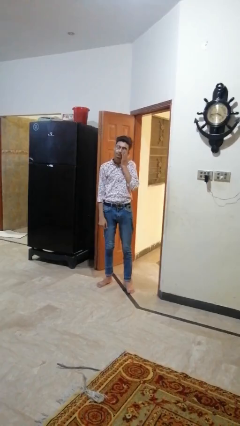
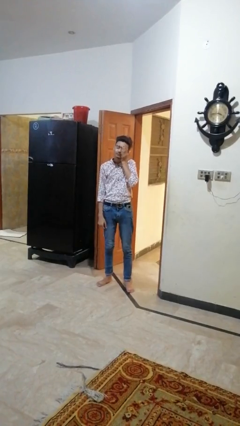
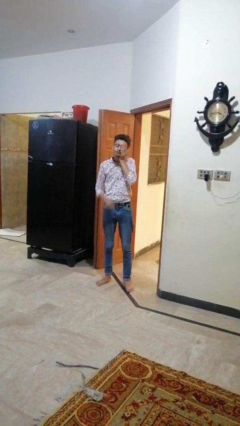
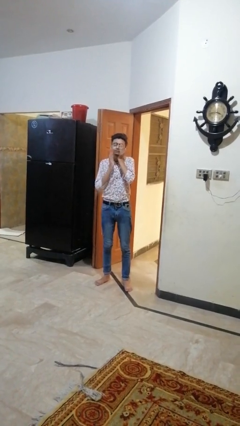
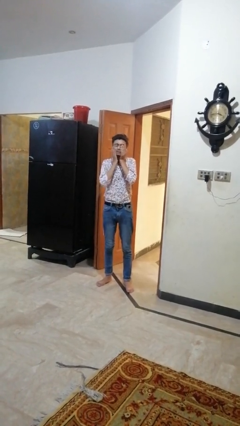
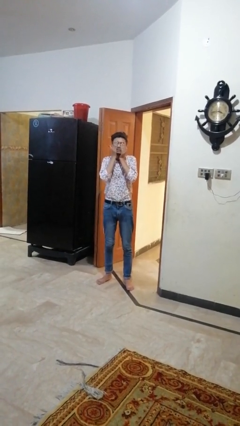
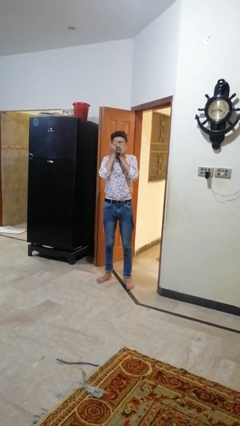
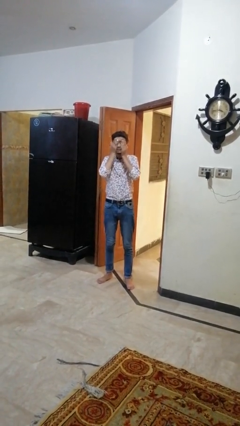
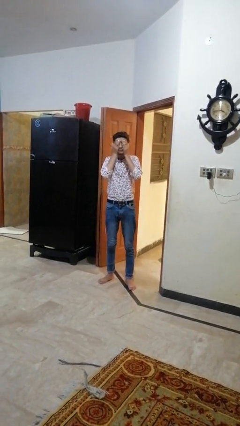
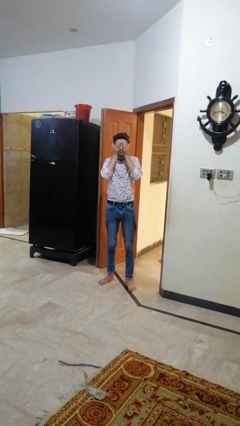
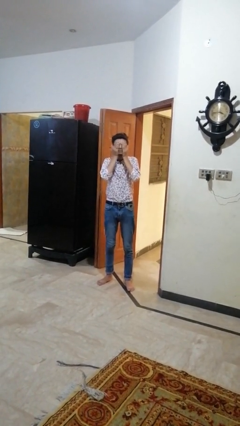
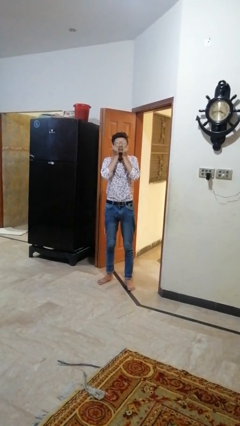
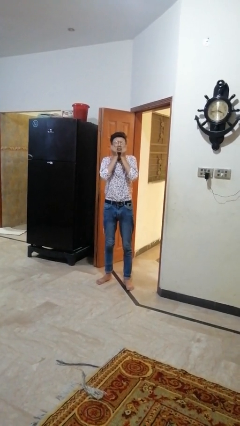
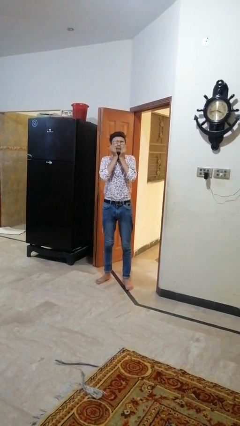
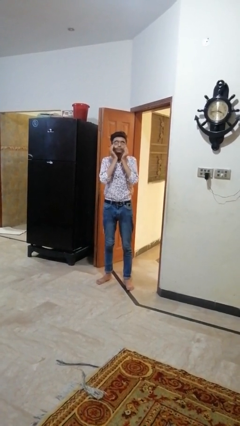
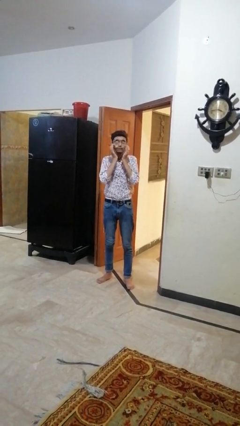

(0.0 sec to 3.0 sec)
person rubs eyes

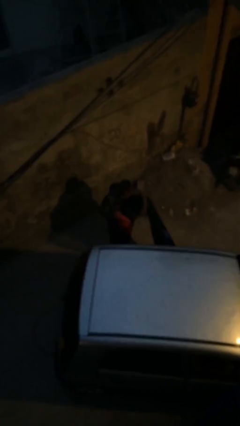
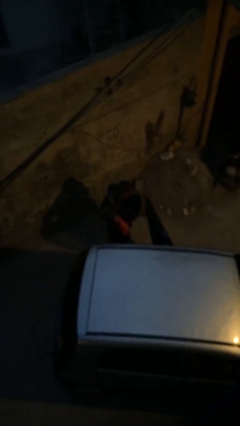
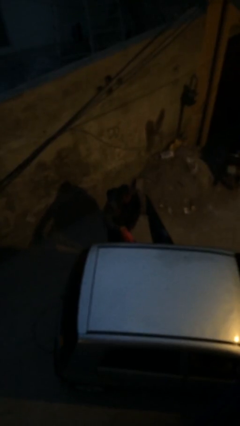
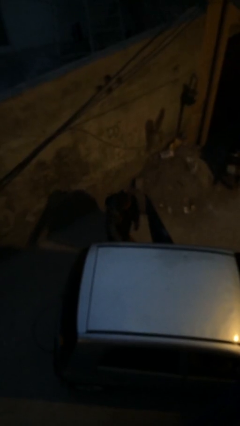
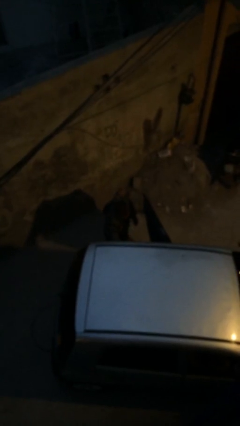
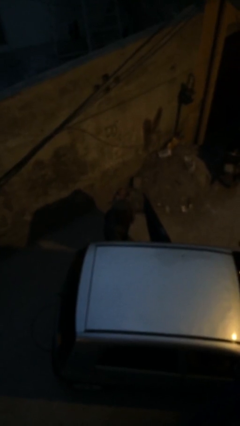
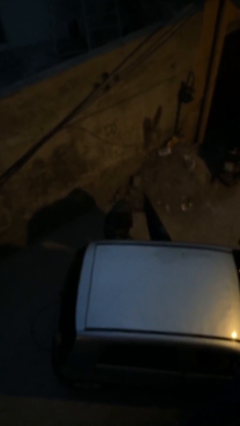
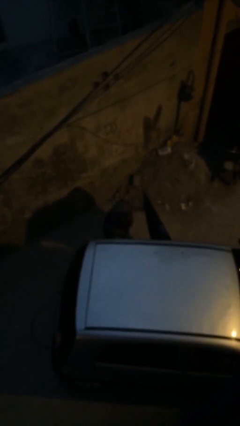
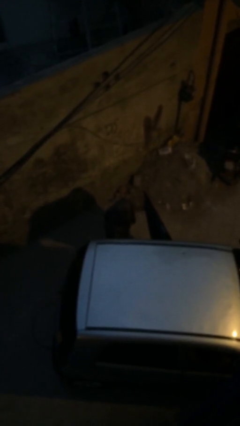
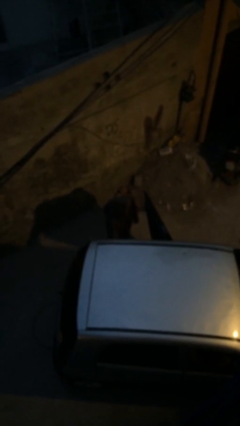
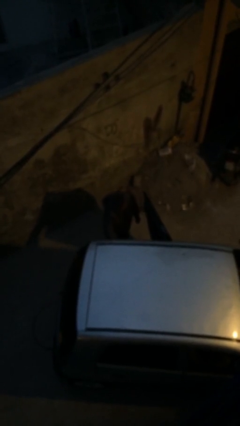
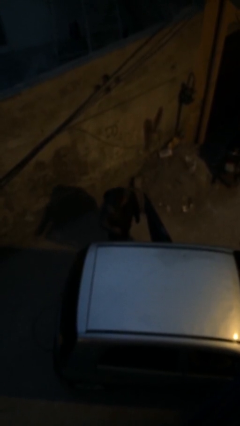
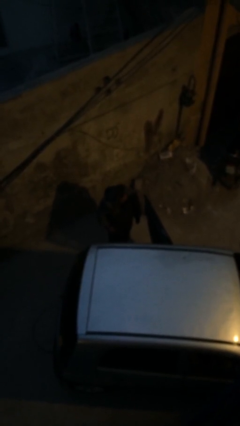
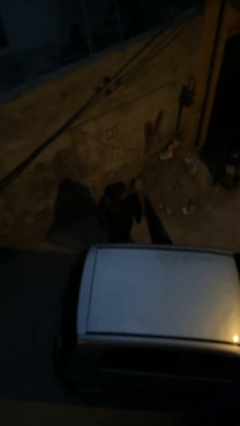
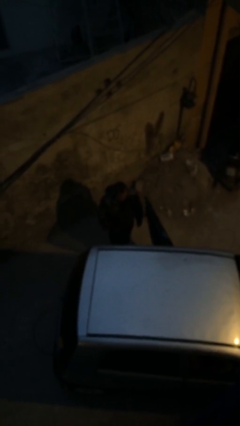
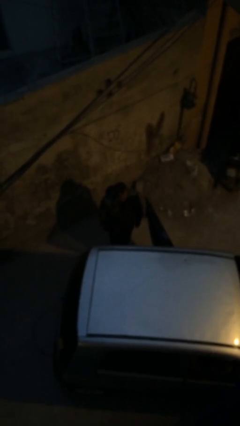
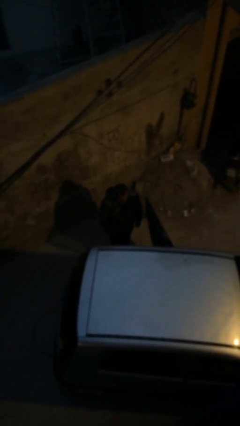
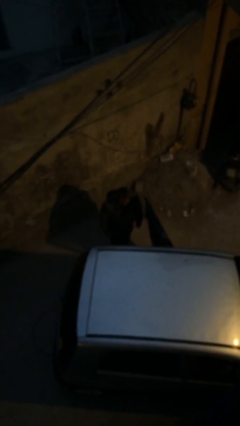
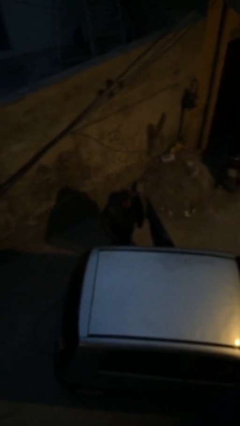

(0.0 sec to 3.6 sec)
person loads car

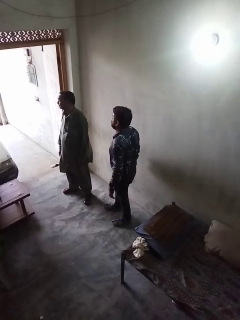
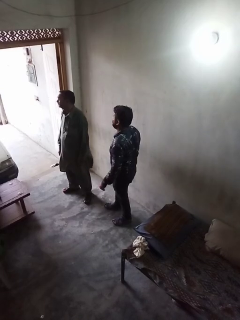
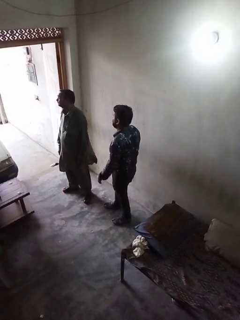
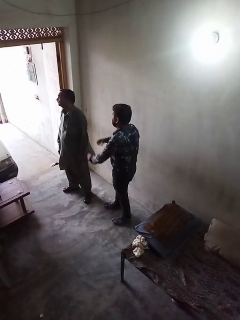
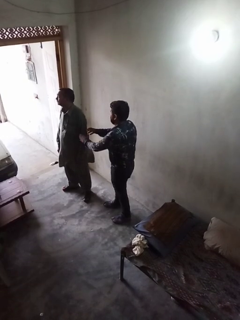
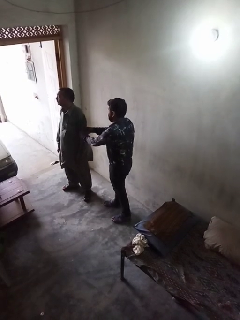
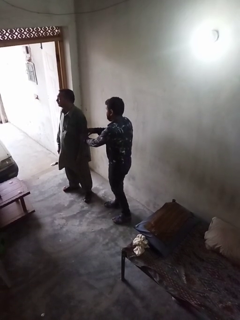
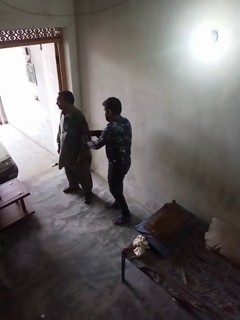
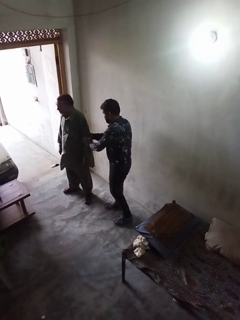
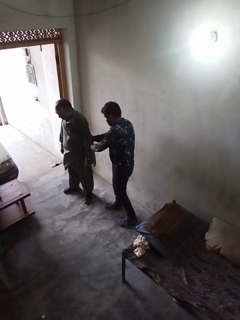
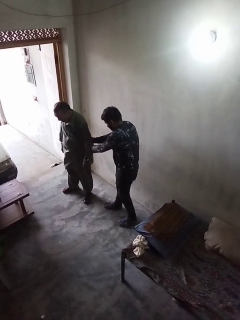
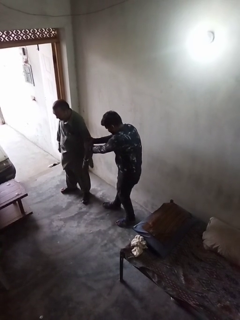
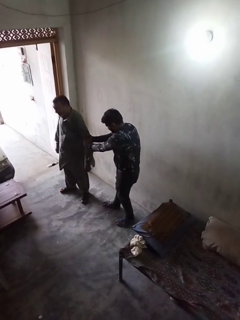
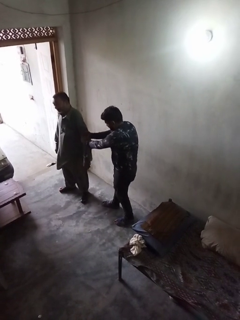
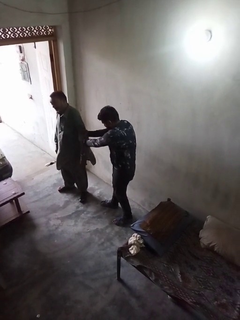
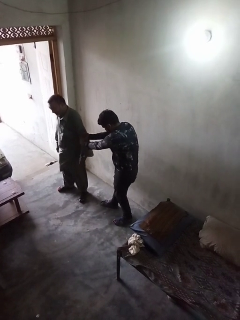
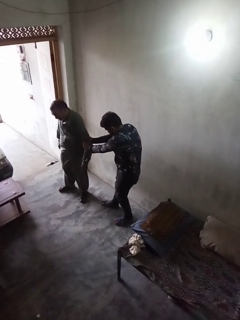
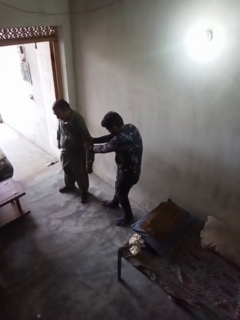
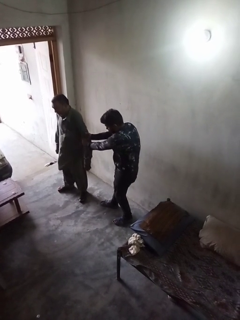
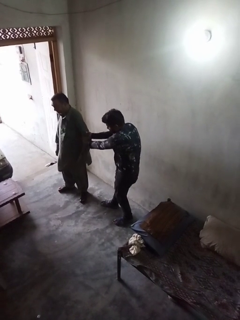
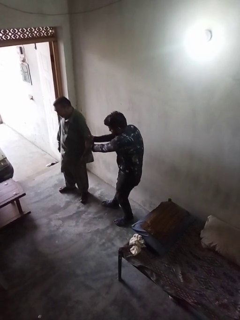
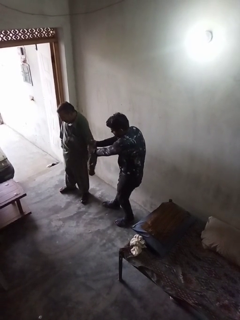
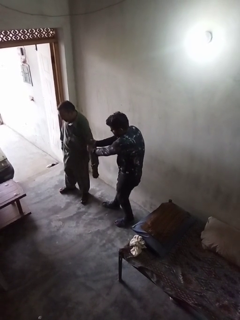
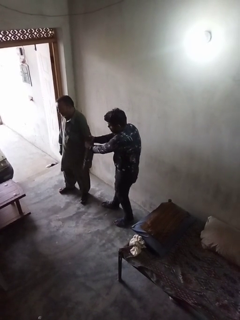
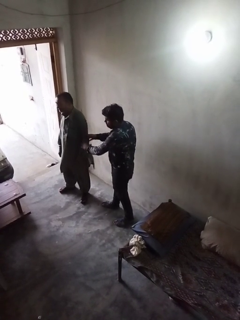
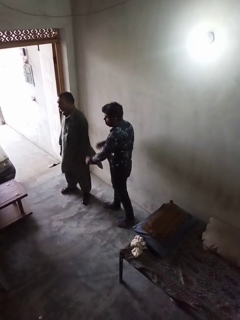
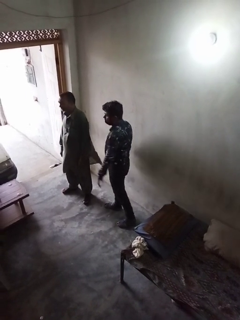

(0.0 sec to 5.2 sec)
person grabs person by forearm

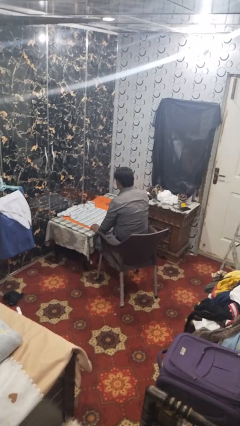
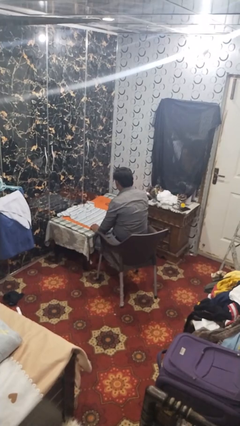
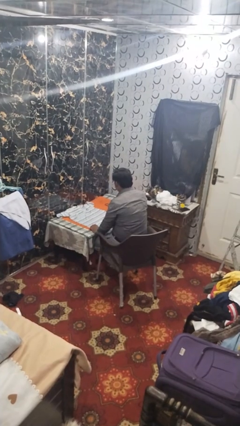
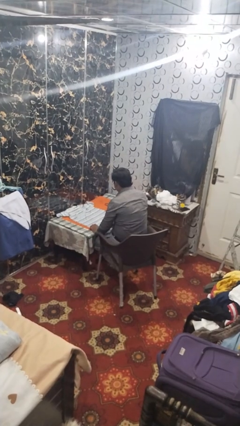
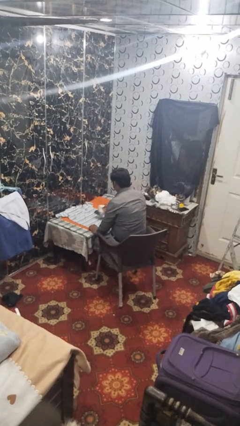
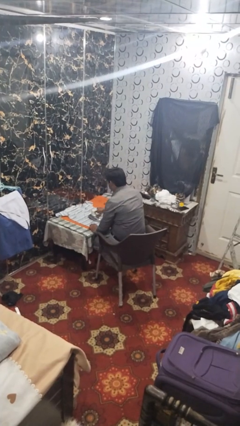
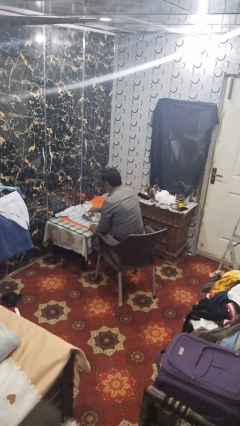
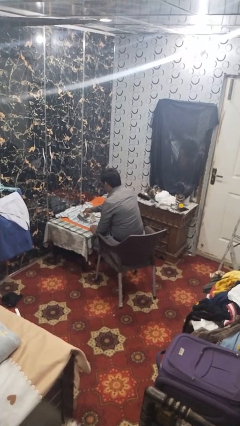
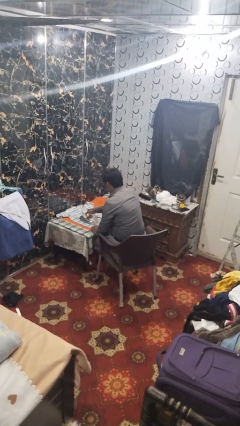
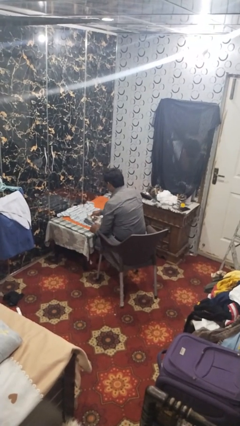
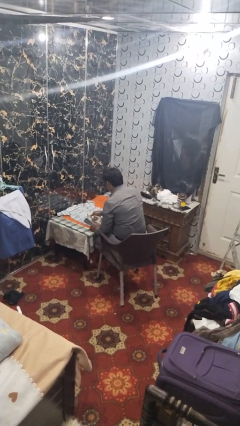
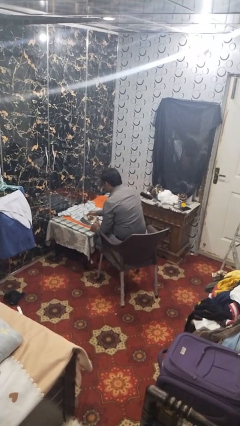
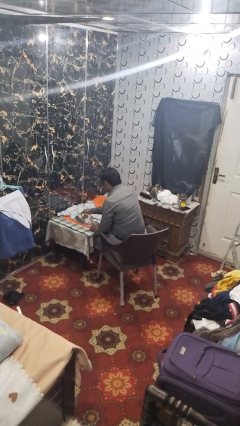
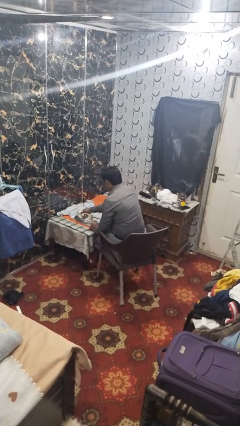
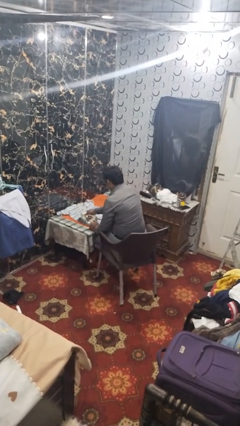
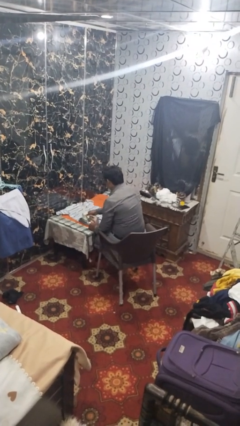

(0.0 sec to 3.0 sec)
person irons clothes

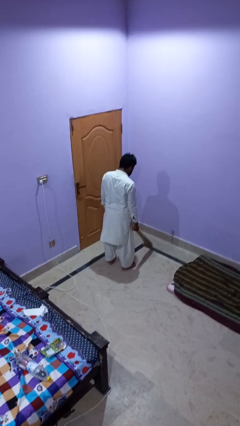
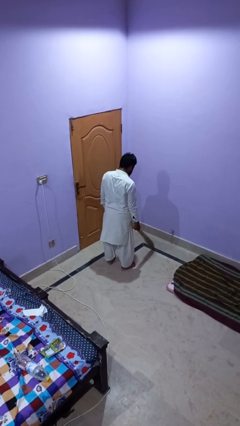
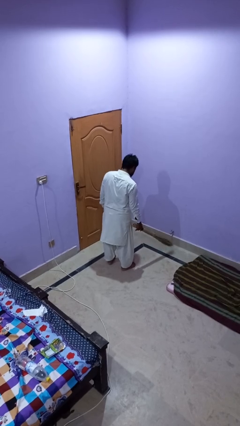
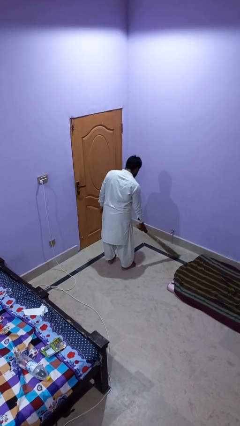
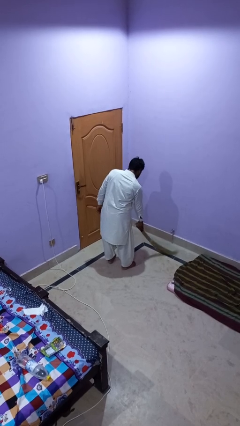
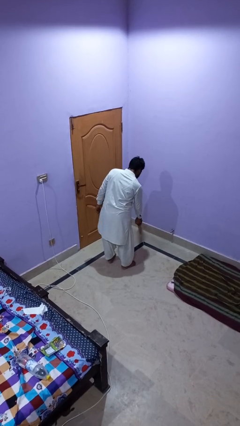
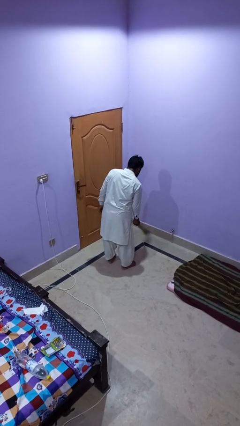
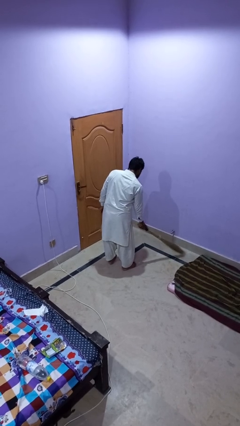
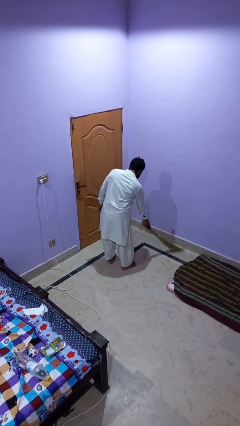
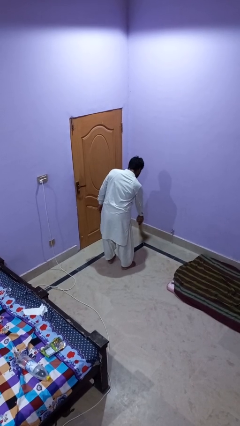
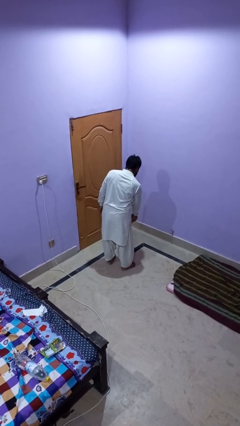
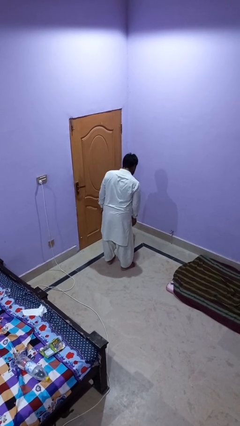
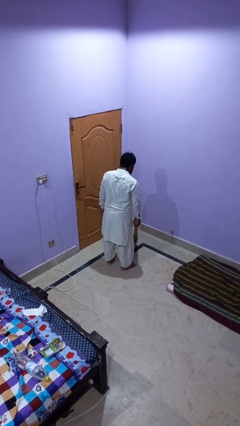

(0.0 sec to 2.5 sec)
person sweeps floor

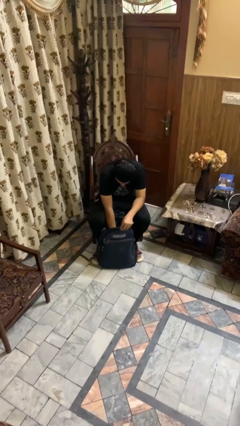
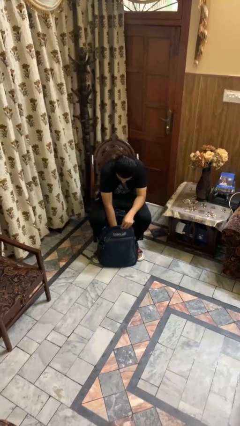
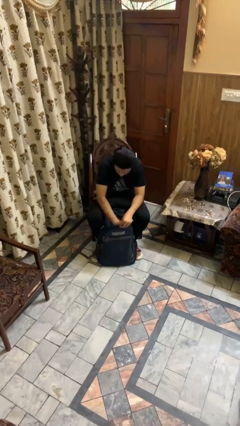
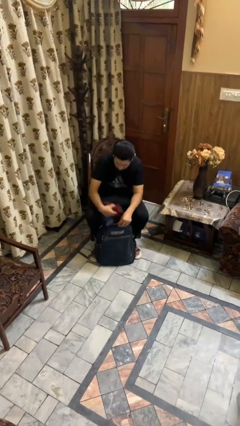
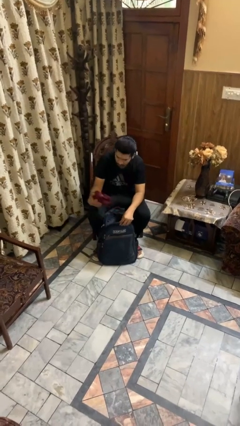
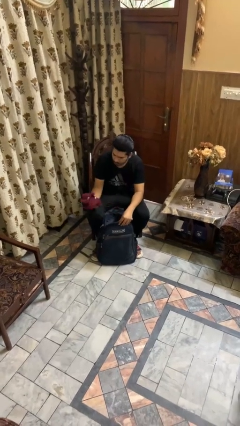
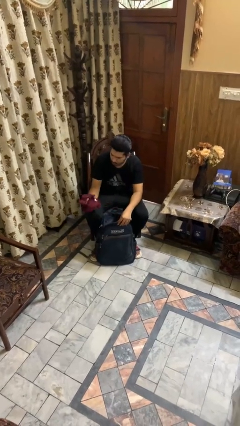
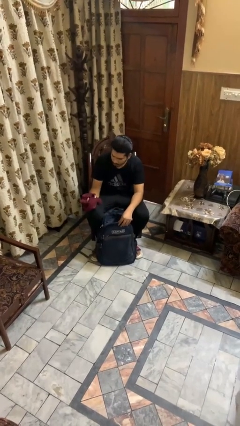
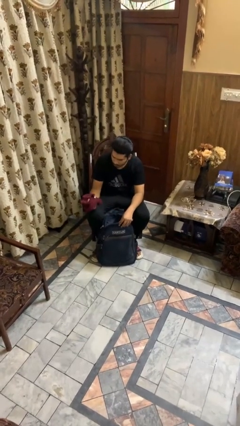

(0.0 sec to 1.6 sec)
person takes object from backpack
